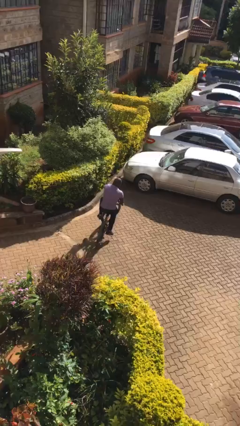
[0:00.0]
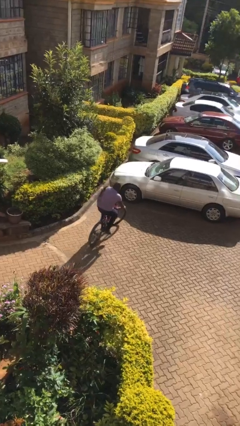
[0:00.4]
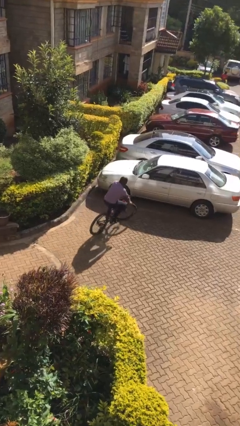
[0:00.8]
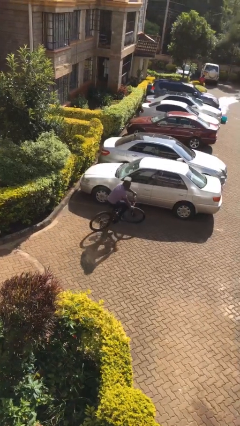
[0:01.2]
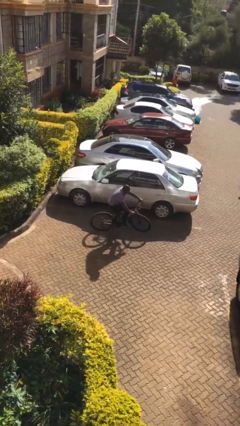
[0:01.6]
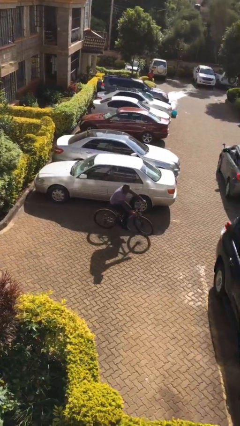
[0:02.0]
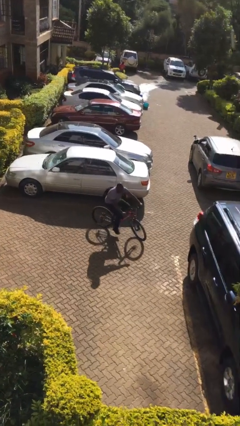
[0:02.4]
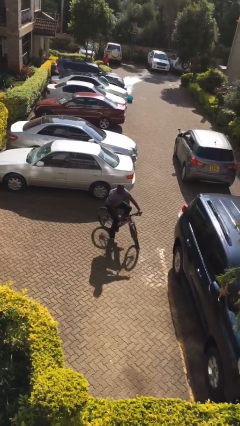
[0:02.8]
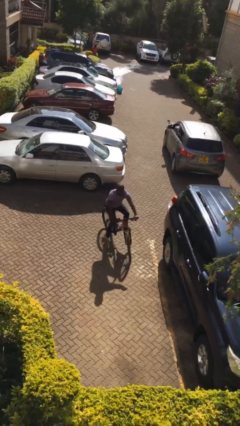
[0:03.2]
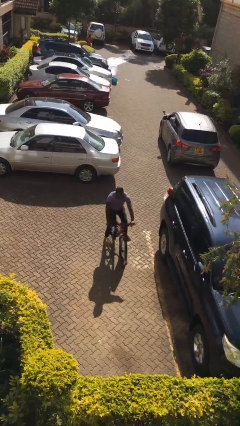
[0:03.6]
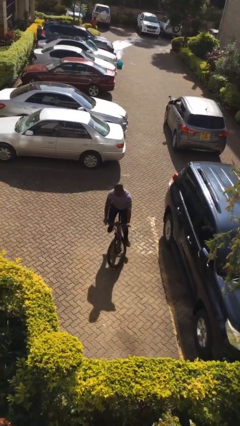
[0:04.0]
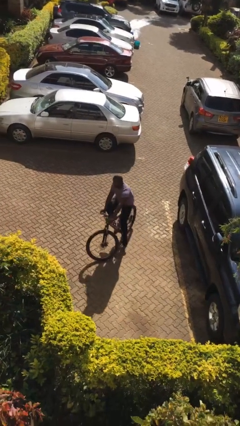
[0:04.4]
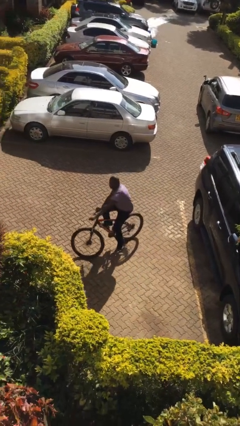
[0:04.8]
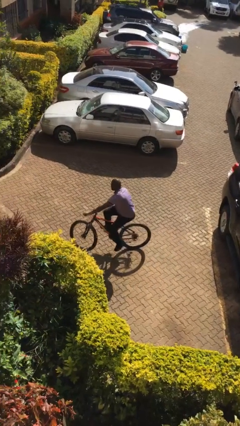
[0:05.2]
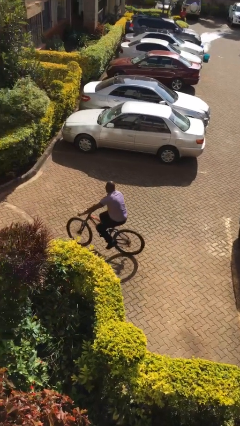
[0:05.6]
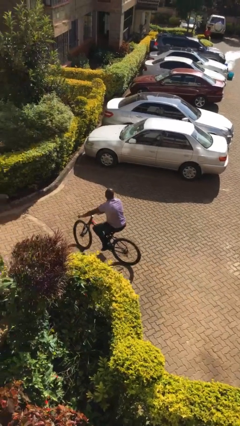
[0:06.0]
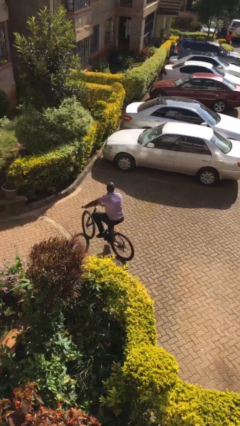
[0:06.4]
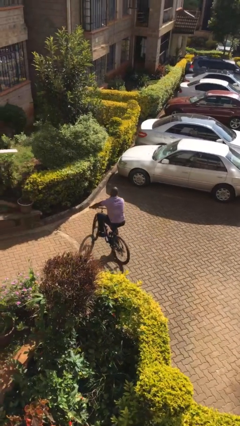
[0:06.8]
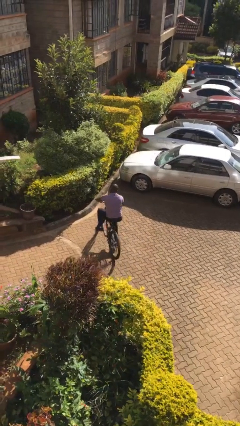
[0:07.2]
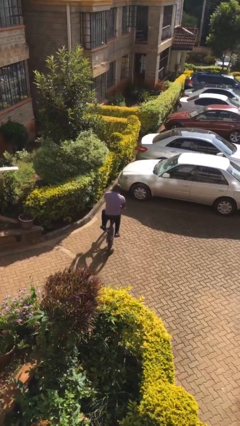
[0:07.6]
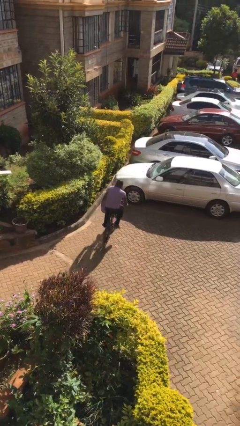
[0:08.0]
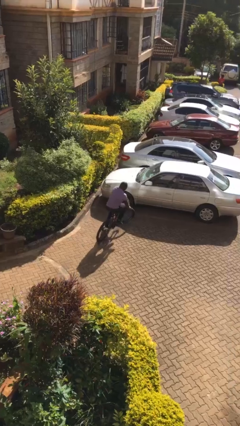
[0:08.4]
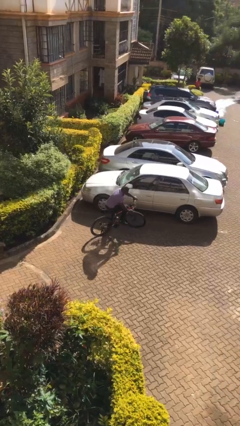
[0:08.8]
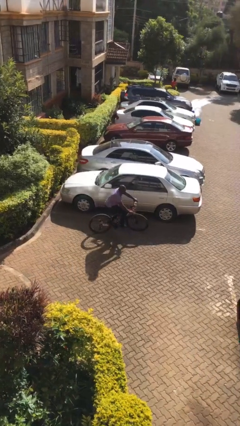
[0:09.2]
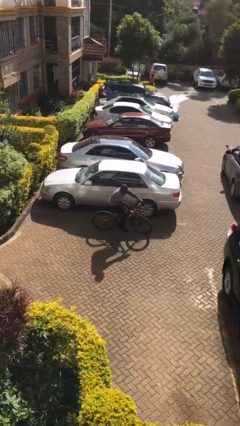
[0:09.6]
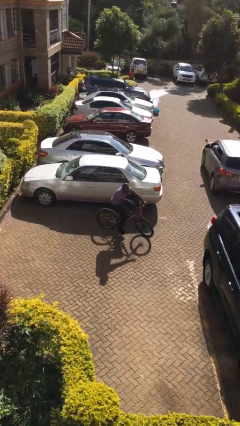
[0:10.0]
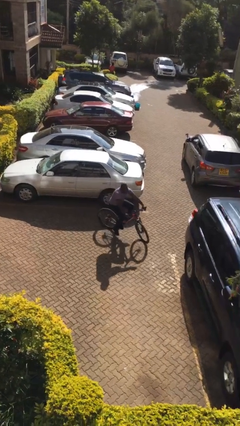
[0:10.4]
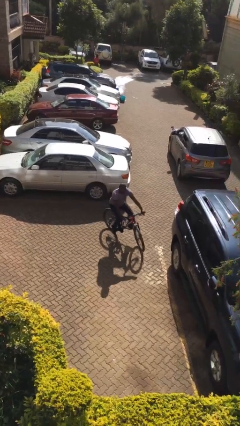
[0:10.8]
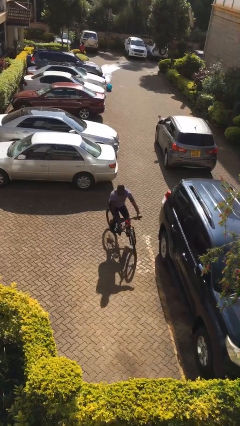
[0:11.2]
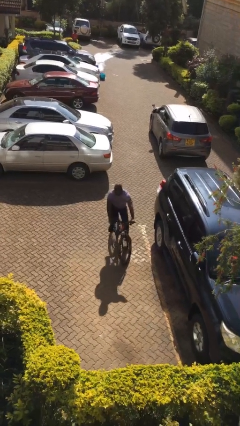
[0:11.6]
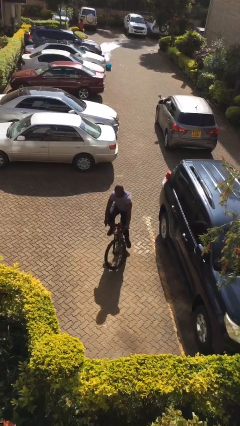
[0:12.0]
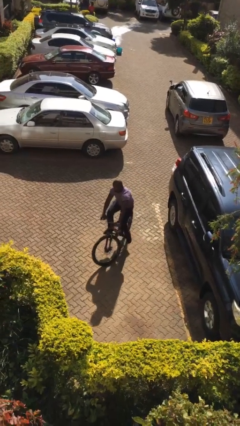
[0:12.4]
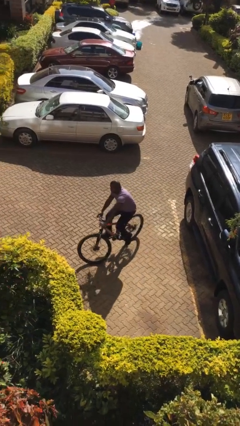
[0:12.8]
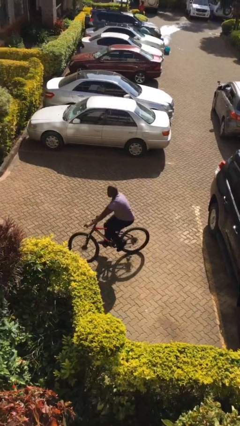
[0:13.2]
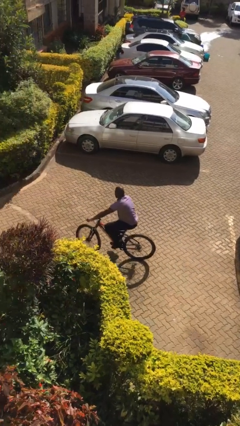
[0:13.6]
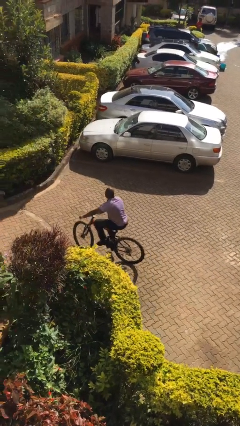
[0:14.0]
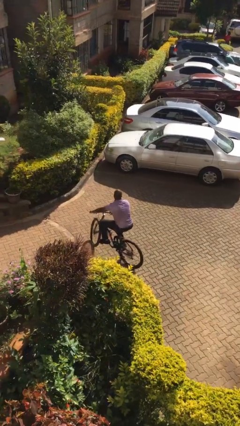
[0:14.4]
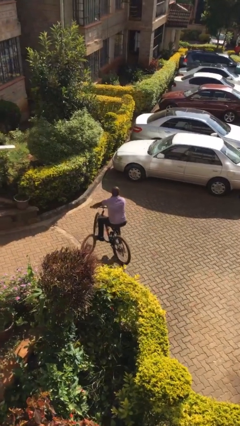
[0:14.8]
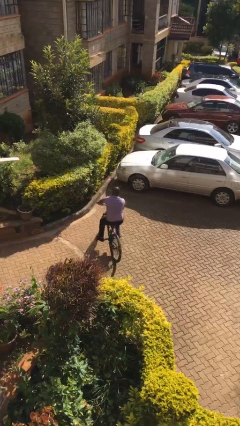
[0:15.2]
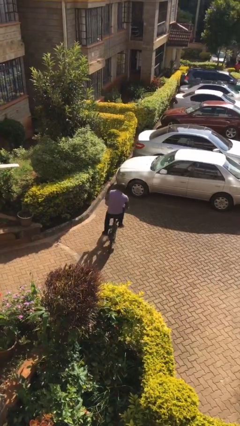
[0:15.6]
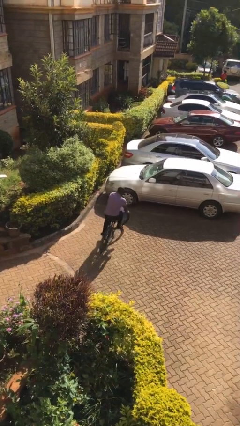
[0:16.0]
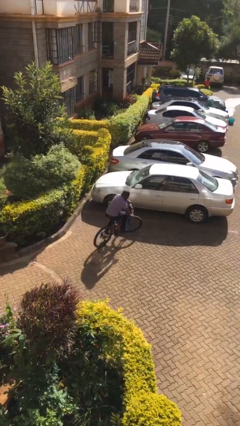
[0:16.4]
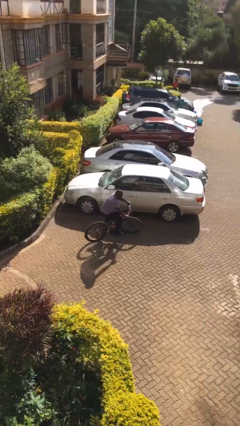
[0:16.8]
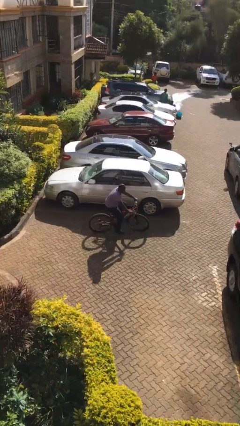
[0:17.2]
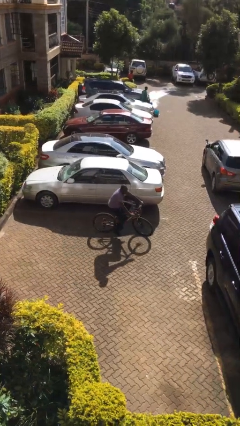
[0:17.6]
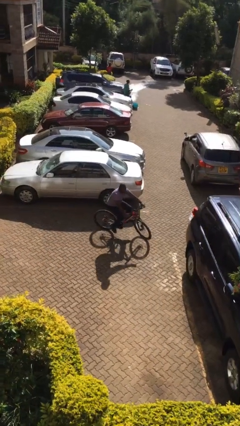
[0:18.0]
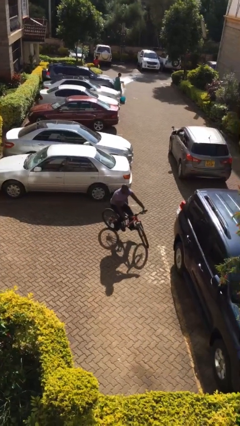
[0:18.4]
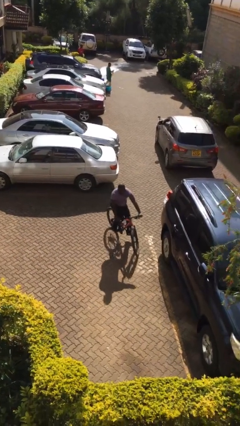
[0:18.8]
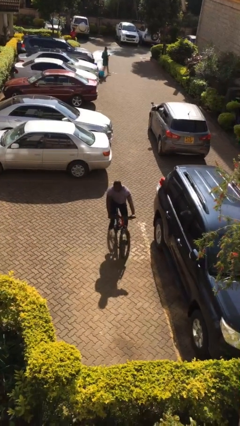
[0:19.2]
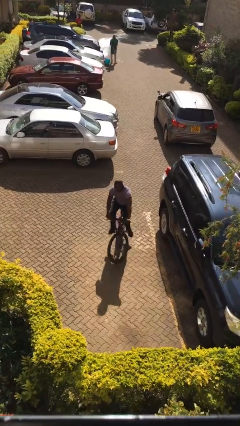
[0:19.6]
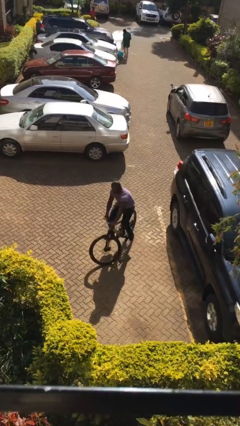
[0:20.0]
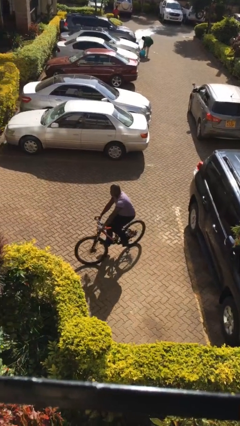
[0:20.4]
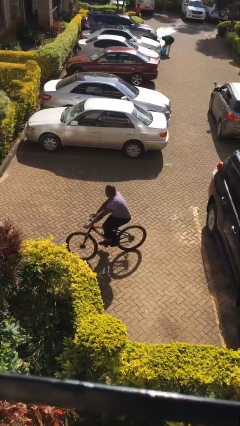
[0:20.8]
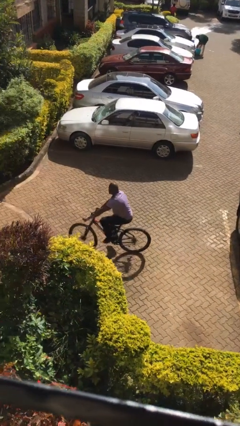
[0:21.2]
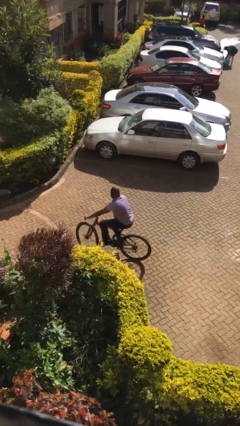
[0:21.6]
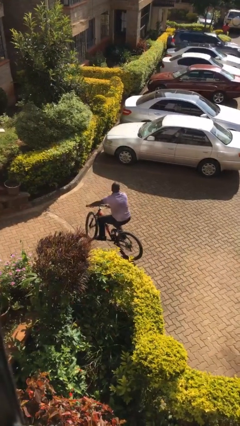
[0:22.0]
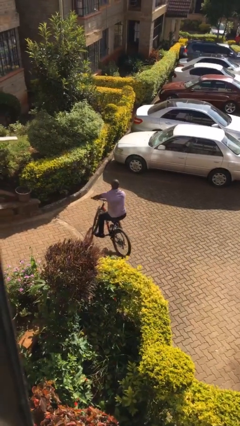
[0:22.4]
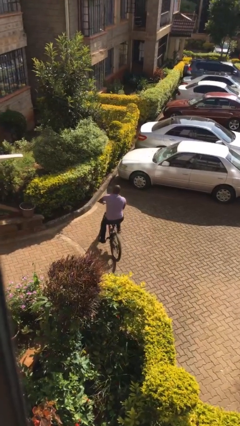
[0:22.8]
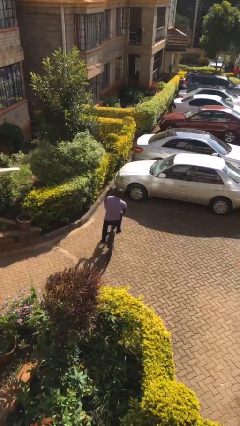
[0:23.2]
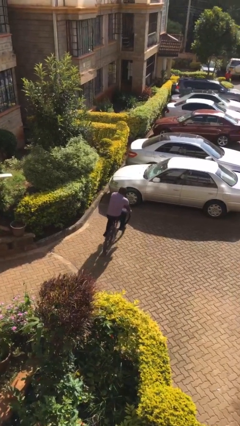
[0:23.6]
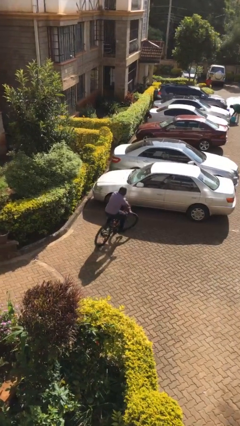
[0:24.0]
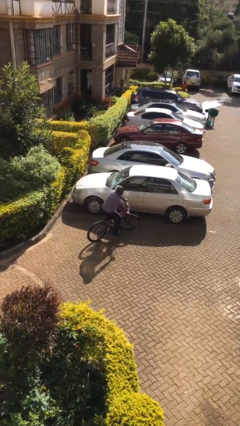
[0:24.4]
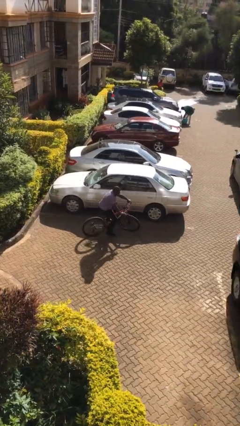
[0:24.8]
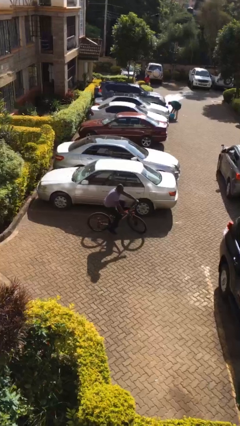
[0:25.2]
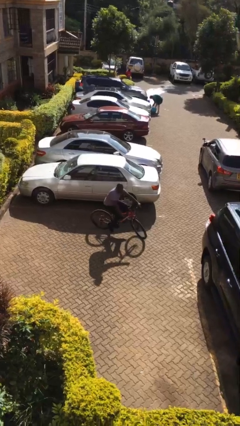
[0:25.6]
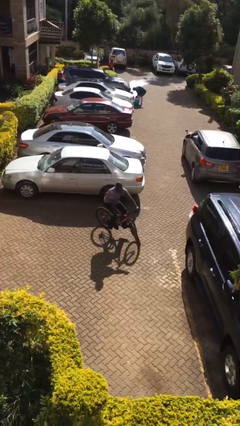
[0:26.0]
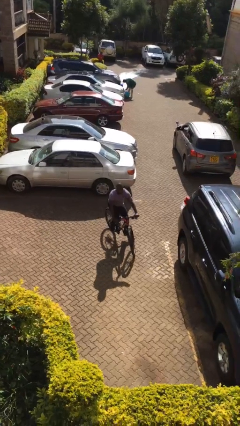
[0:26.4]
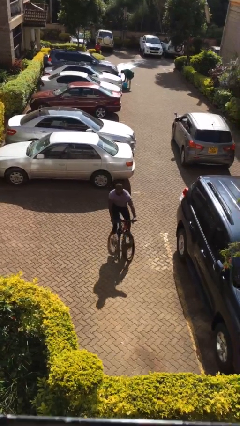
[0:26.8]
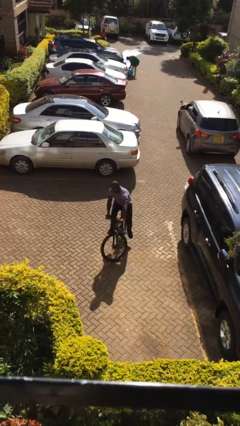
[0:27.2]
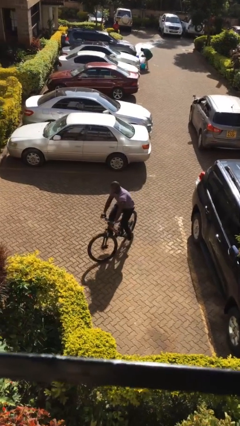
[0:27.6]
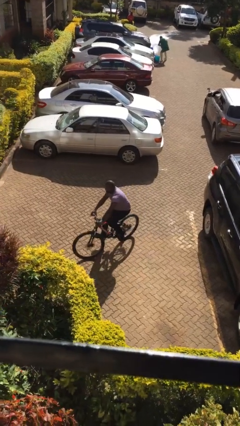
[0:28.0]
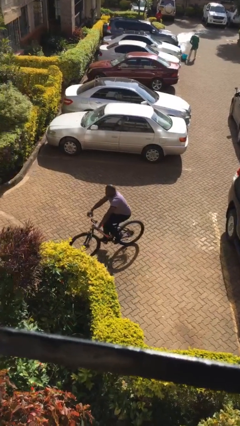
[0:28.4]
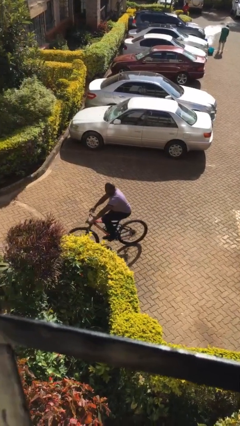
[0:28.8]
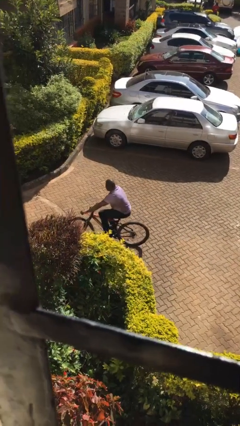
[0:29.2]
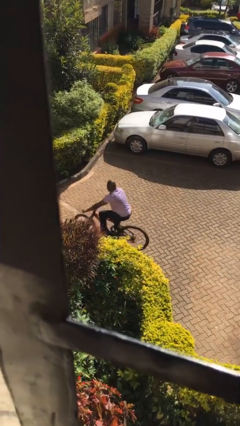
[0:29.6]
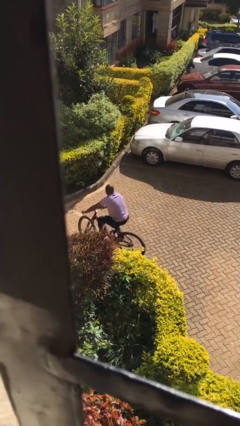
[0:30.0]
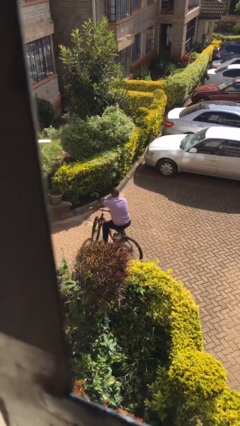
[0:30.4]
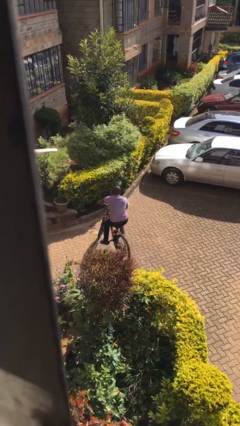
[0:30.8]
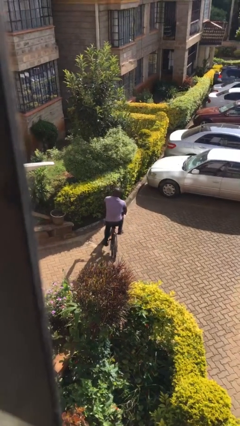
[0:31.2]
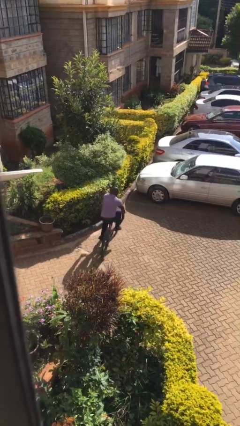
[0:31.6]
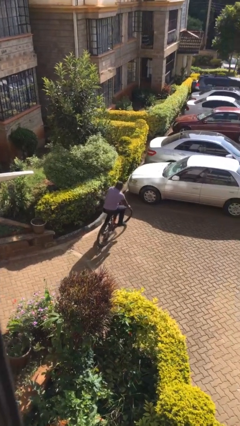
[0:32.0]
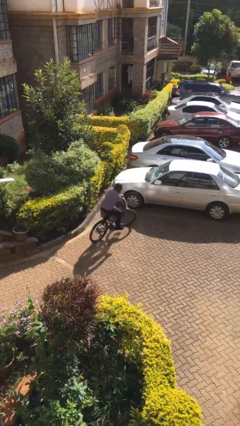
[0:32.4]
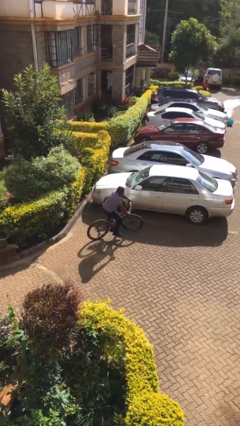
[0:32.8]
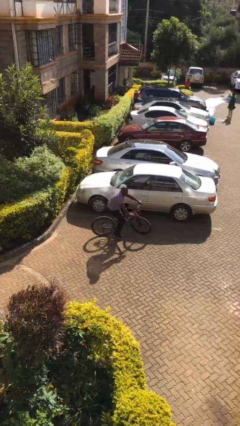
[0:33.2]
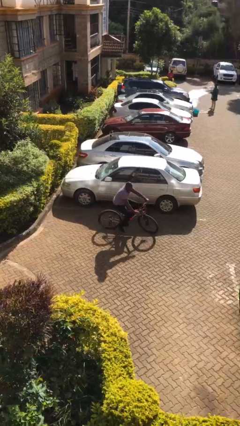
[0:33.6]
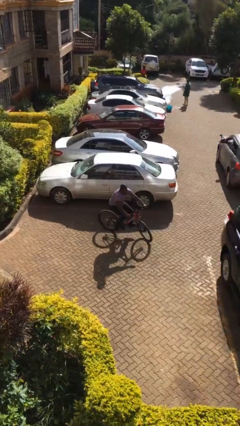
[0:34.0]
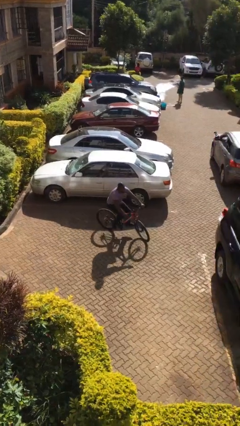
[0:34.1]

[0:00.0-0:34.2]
person rides bicycle

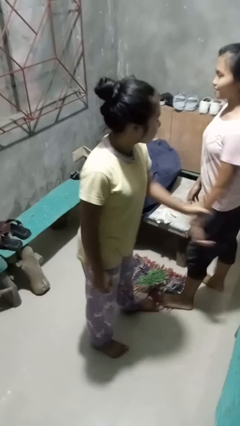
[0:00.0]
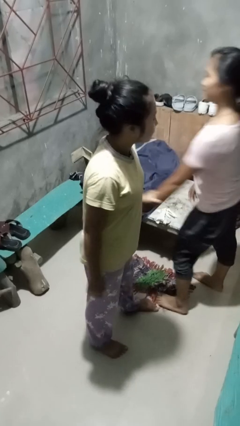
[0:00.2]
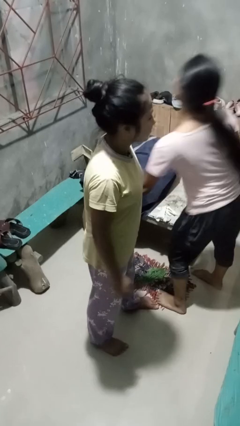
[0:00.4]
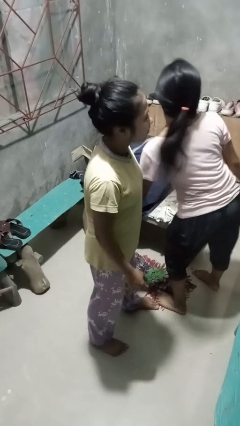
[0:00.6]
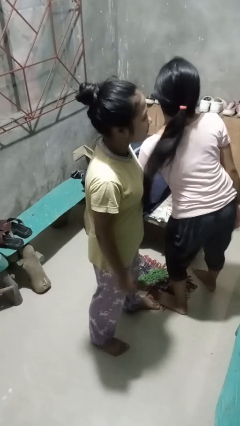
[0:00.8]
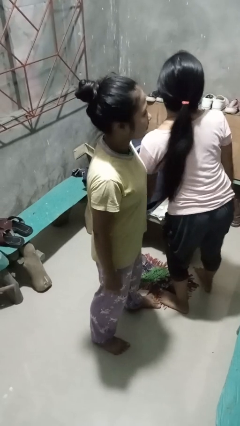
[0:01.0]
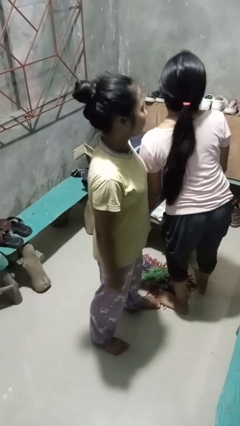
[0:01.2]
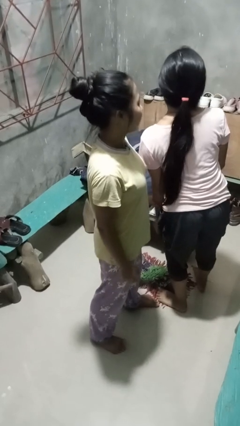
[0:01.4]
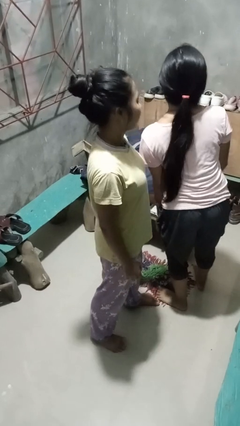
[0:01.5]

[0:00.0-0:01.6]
person grabs person by forearm
